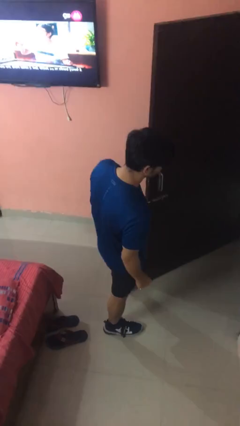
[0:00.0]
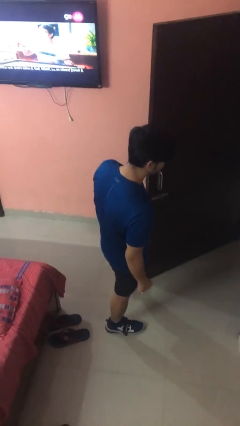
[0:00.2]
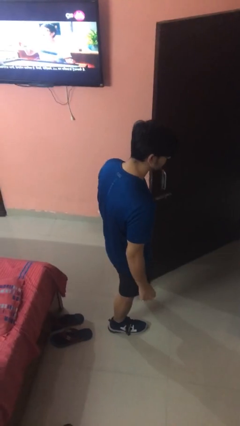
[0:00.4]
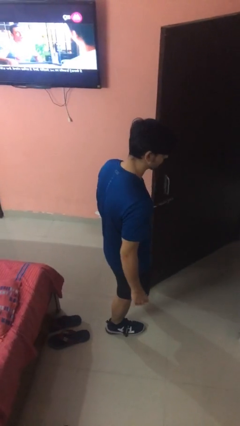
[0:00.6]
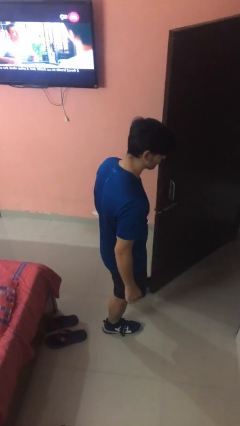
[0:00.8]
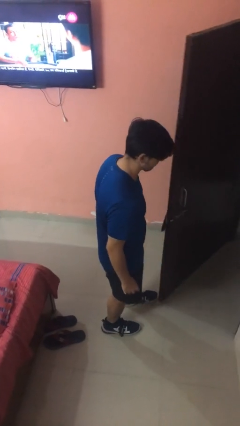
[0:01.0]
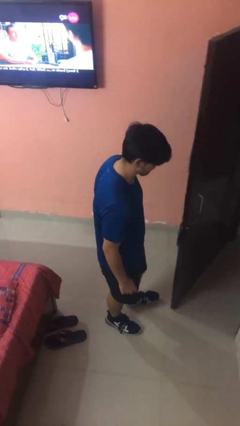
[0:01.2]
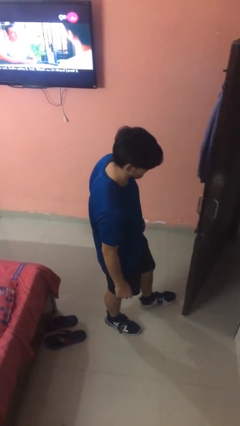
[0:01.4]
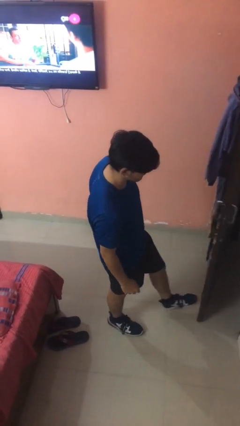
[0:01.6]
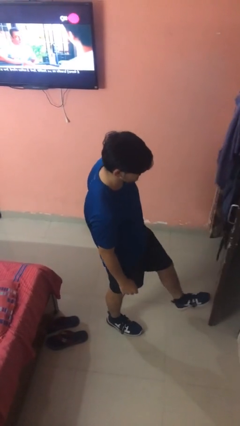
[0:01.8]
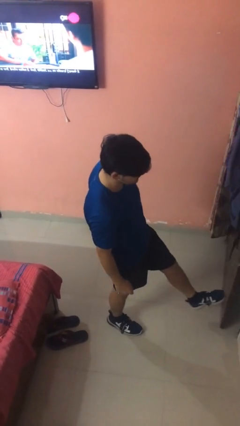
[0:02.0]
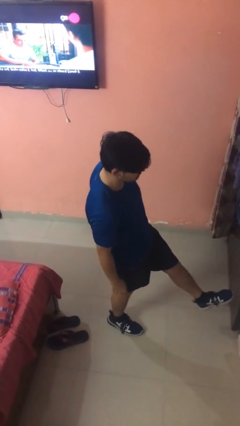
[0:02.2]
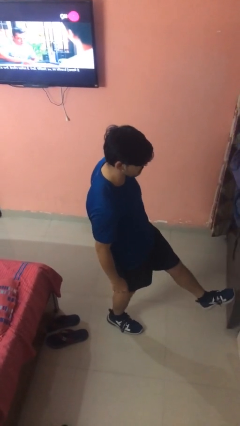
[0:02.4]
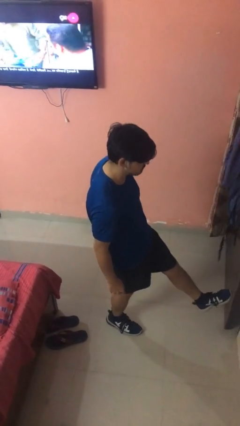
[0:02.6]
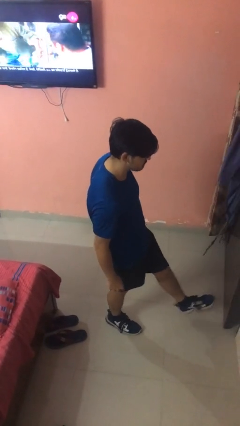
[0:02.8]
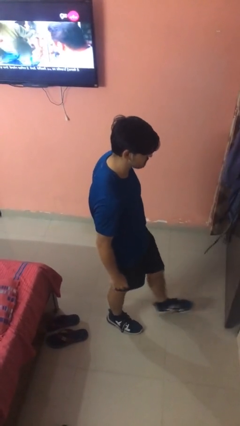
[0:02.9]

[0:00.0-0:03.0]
person closes door with foot

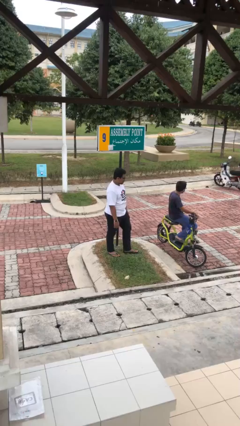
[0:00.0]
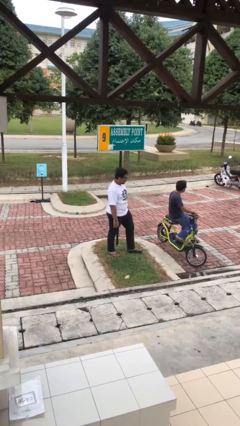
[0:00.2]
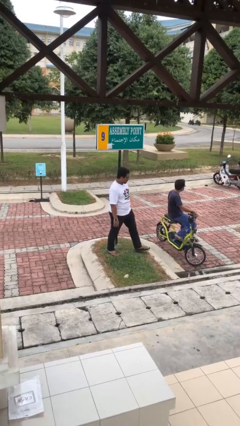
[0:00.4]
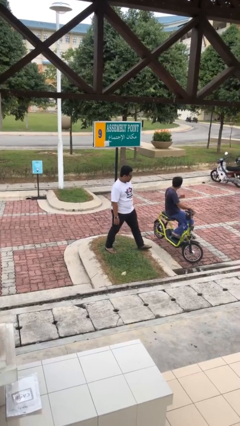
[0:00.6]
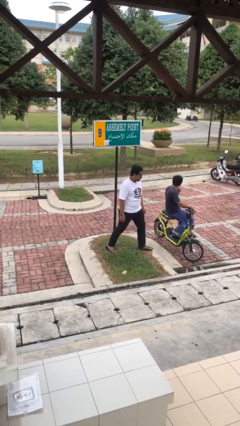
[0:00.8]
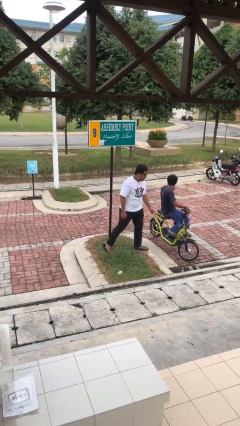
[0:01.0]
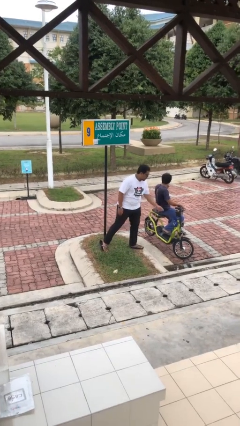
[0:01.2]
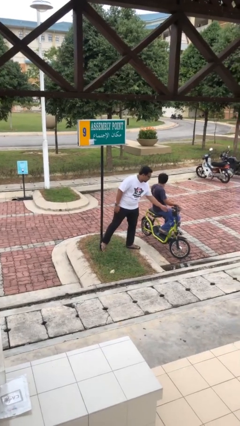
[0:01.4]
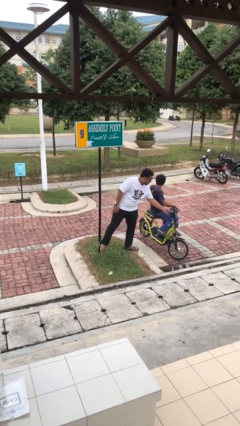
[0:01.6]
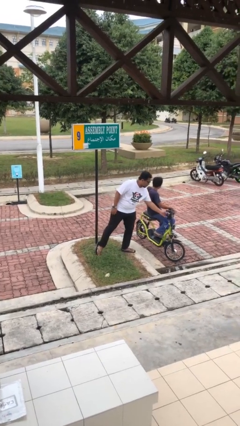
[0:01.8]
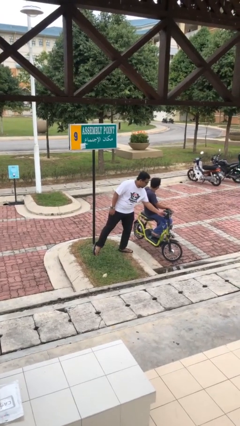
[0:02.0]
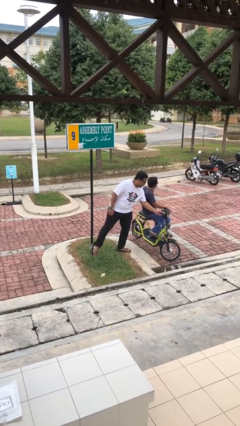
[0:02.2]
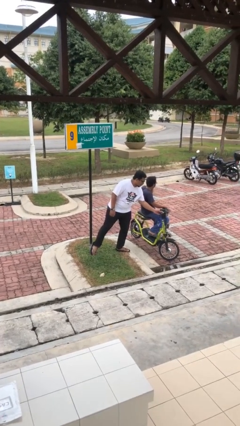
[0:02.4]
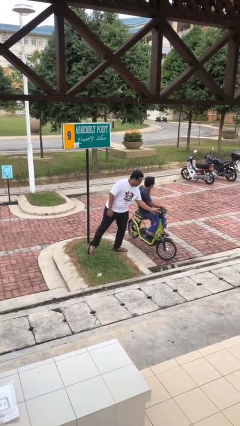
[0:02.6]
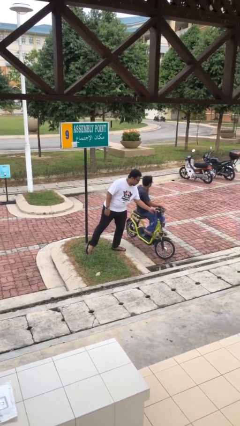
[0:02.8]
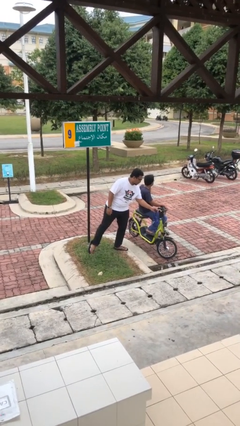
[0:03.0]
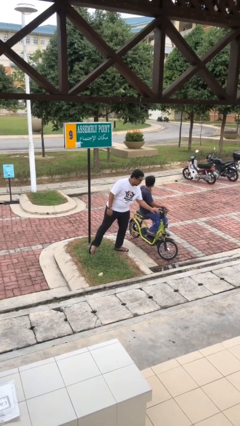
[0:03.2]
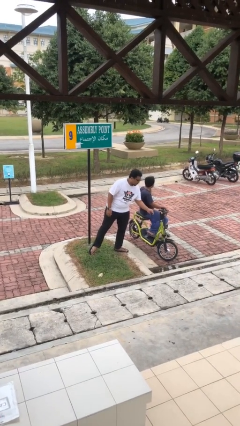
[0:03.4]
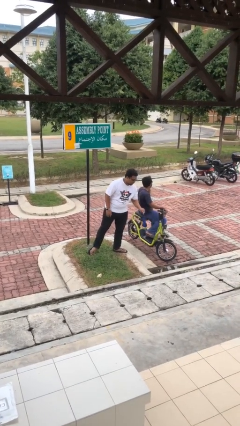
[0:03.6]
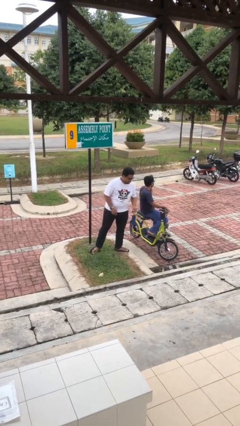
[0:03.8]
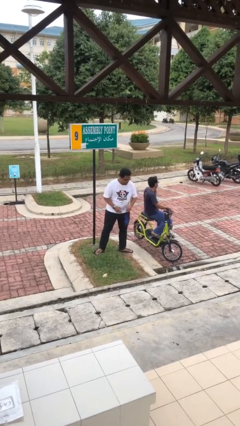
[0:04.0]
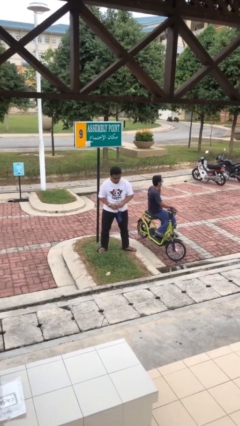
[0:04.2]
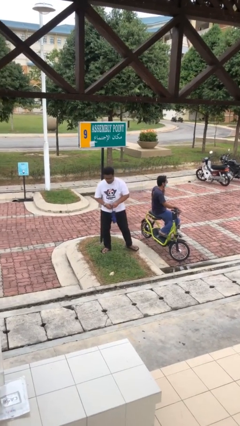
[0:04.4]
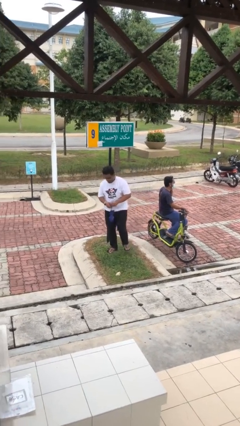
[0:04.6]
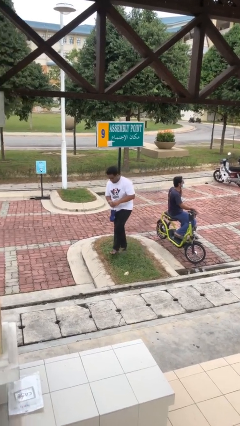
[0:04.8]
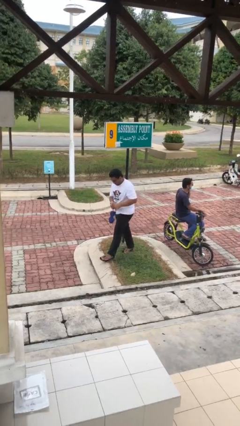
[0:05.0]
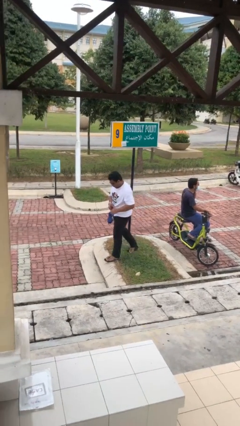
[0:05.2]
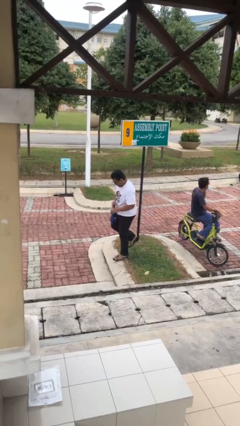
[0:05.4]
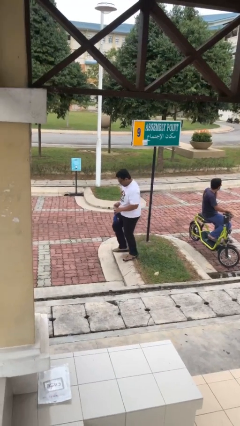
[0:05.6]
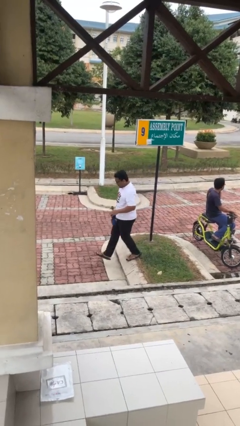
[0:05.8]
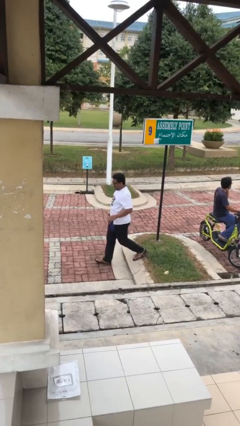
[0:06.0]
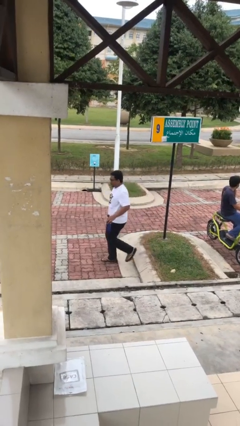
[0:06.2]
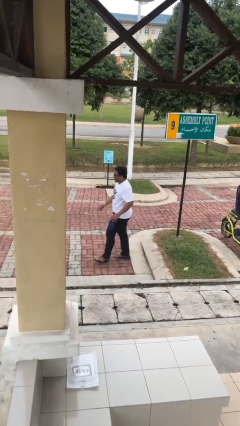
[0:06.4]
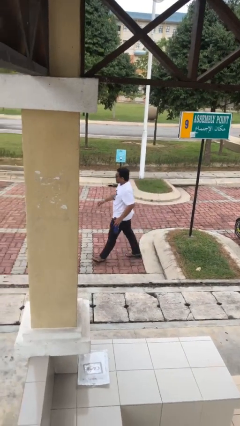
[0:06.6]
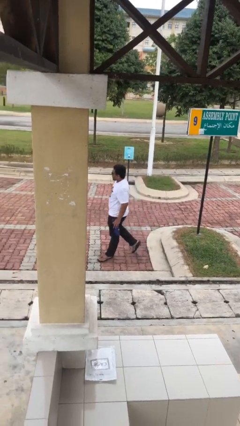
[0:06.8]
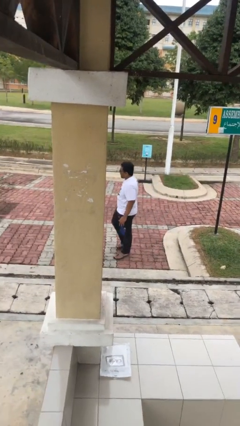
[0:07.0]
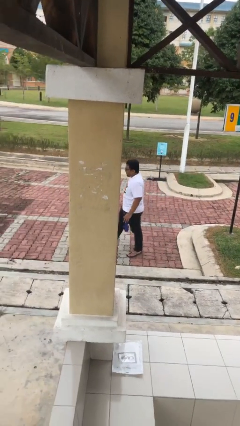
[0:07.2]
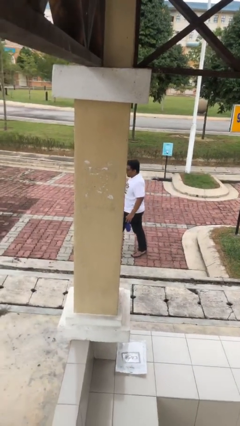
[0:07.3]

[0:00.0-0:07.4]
person steals object from person

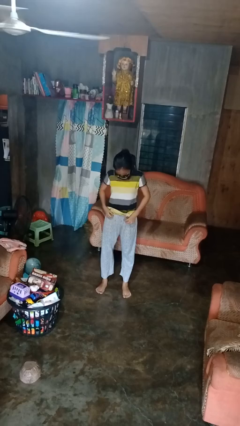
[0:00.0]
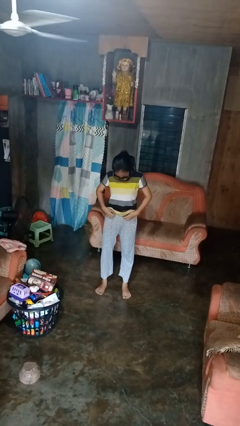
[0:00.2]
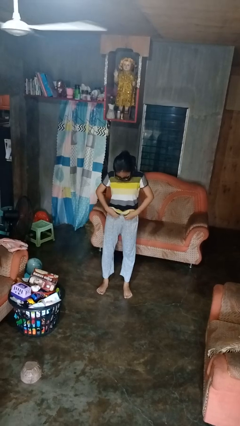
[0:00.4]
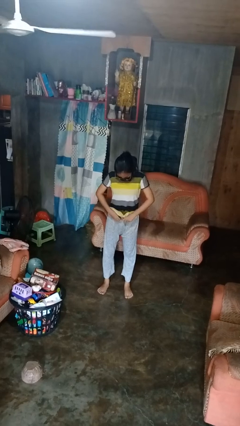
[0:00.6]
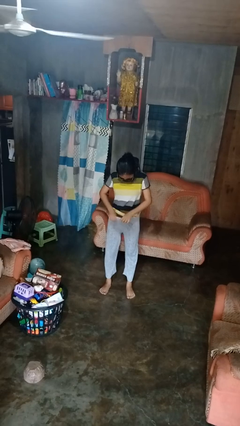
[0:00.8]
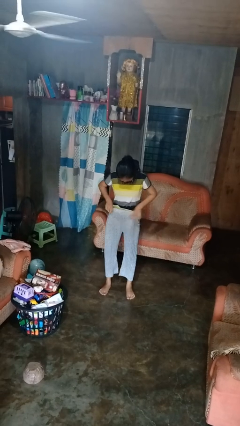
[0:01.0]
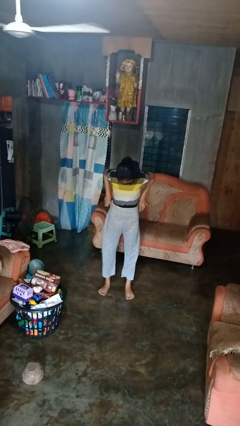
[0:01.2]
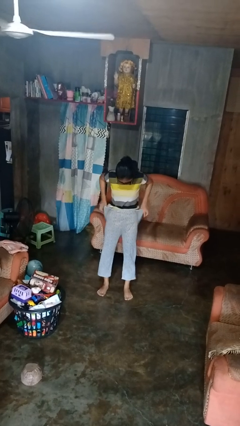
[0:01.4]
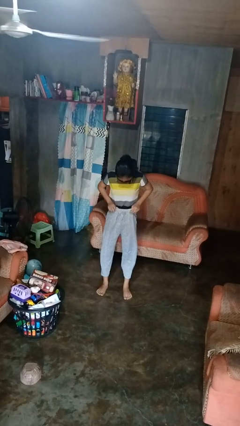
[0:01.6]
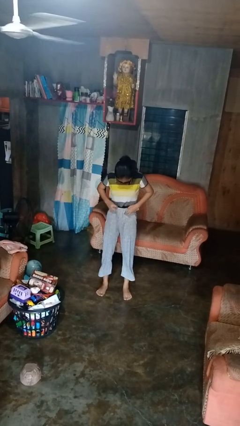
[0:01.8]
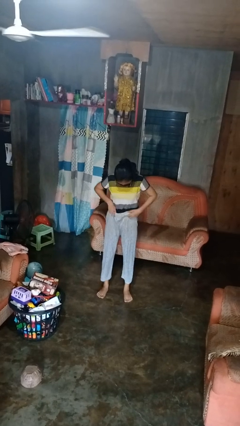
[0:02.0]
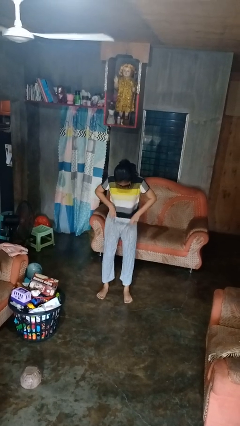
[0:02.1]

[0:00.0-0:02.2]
person tucks in shirt

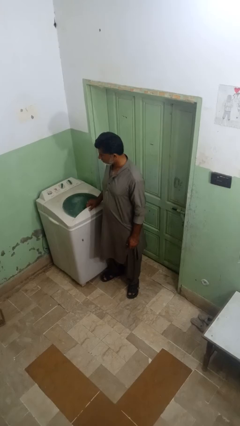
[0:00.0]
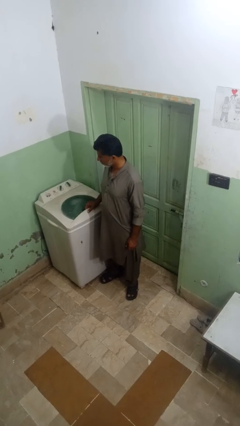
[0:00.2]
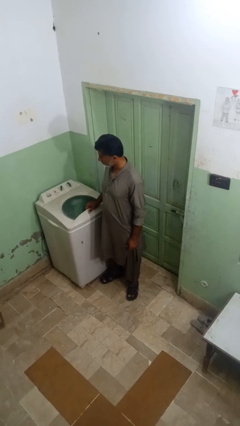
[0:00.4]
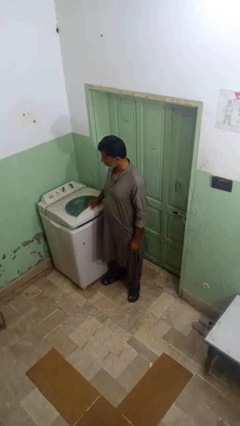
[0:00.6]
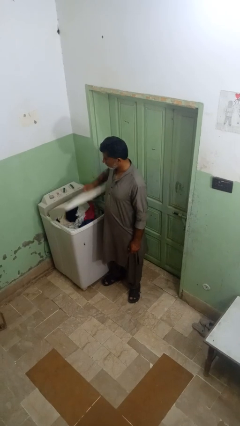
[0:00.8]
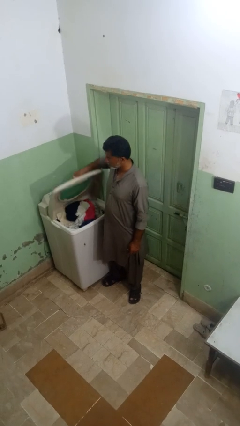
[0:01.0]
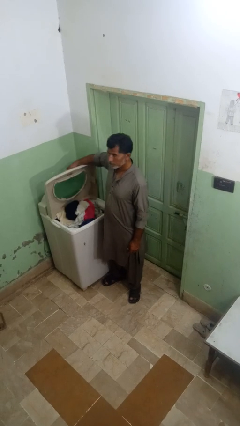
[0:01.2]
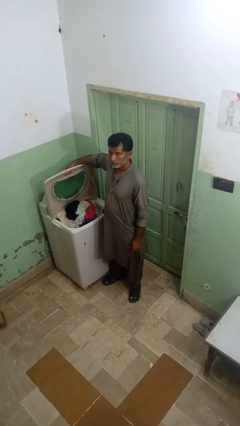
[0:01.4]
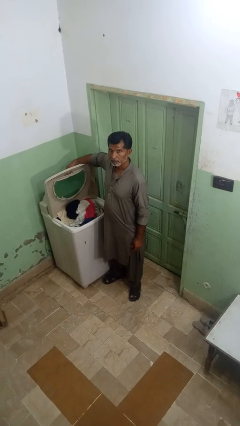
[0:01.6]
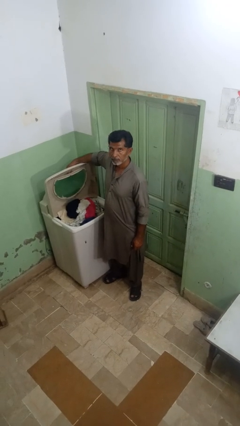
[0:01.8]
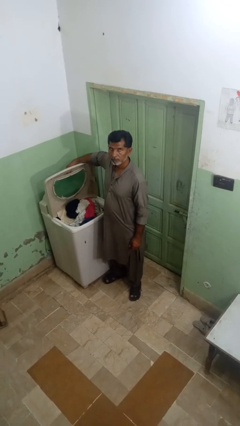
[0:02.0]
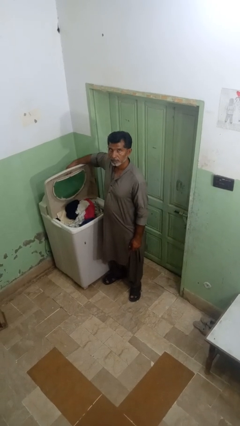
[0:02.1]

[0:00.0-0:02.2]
person opens clothes washer

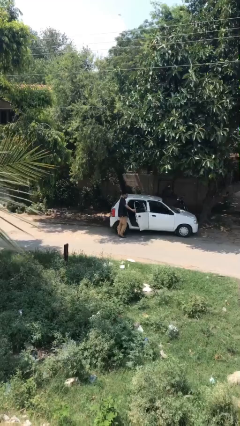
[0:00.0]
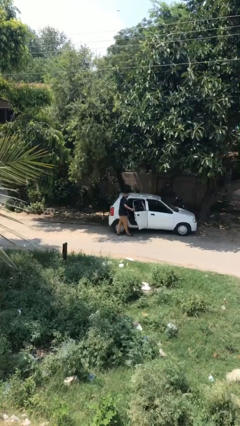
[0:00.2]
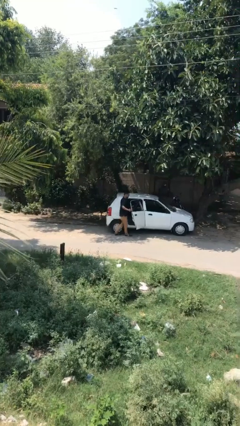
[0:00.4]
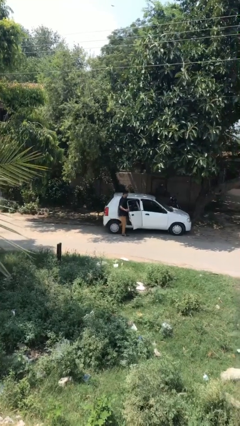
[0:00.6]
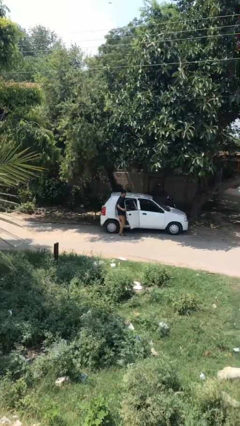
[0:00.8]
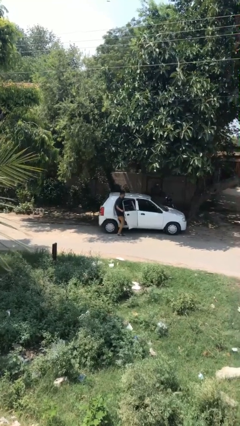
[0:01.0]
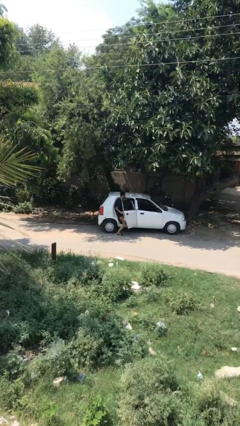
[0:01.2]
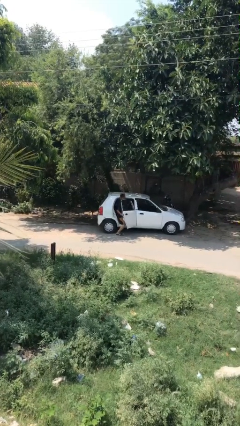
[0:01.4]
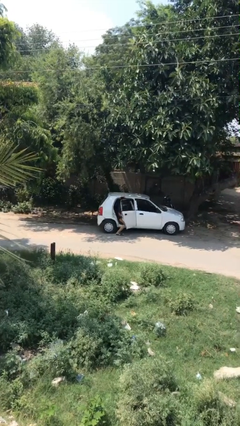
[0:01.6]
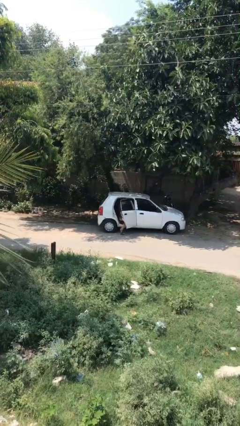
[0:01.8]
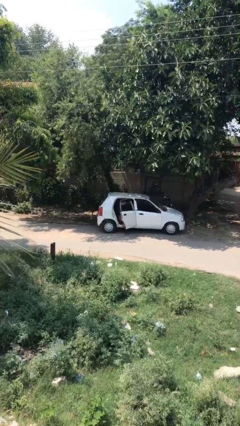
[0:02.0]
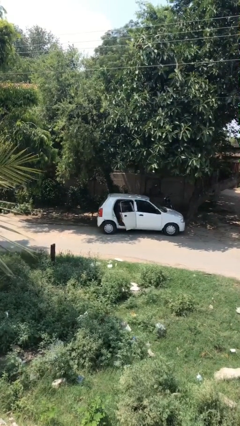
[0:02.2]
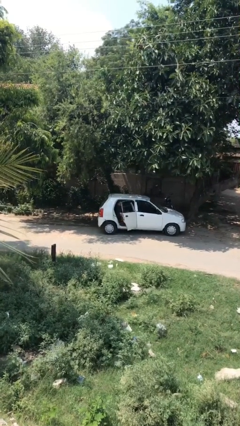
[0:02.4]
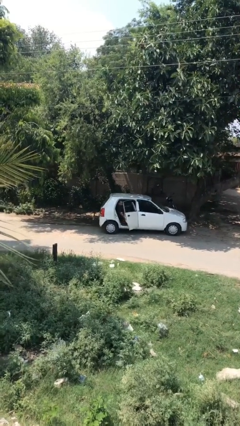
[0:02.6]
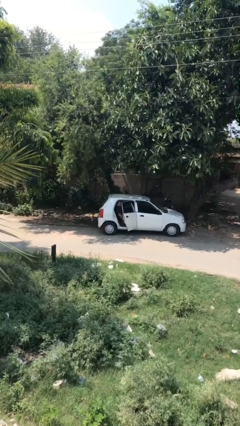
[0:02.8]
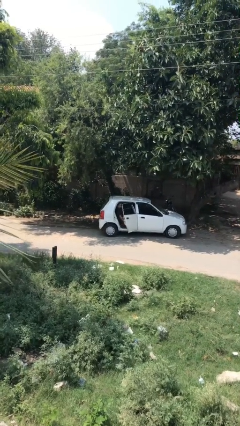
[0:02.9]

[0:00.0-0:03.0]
person enters car
